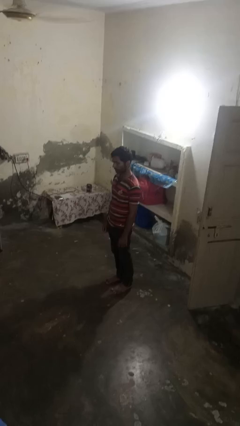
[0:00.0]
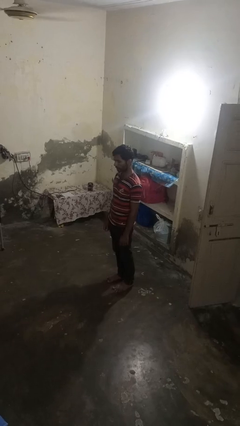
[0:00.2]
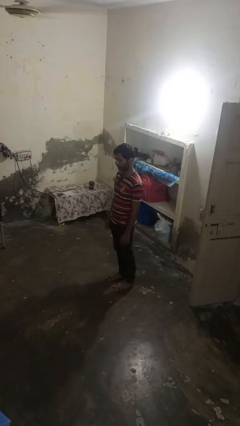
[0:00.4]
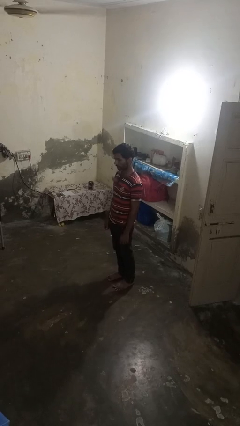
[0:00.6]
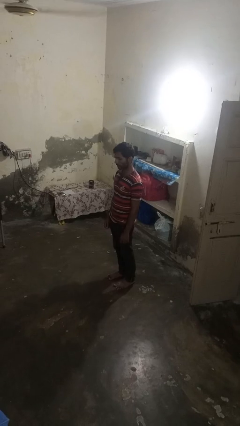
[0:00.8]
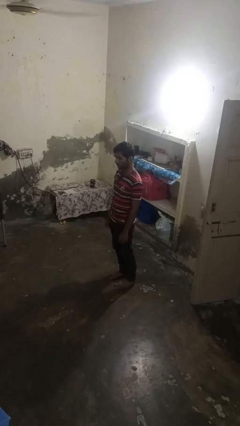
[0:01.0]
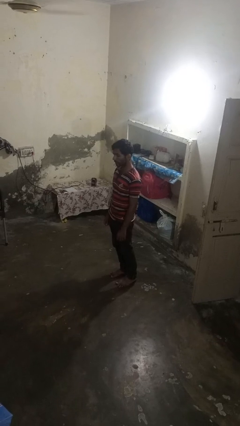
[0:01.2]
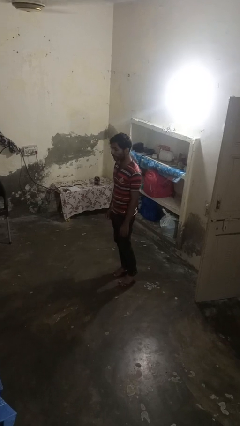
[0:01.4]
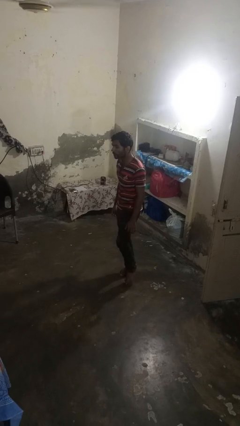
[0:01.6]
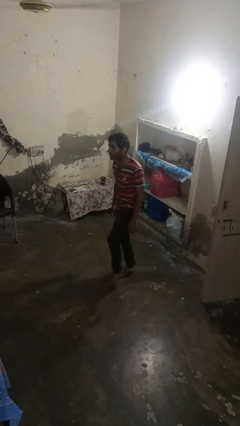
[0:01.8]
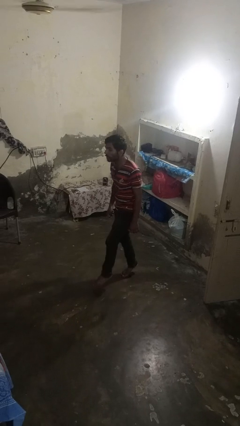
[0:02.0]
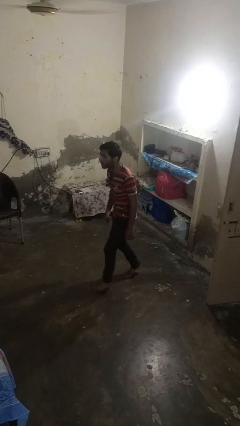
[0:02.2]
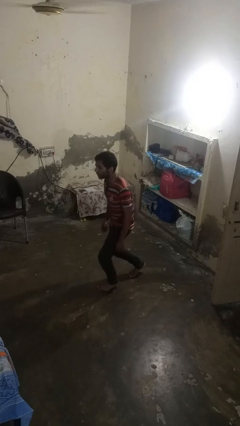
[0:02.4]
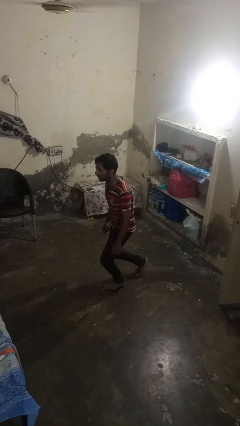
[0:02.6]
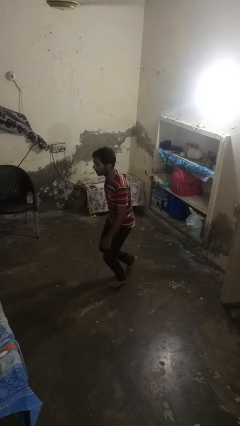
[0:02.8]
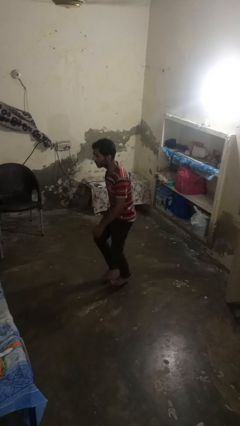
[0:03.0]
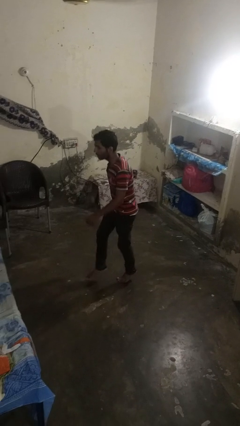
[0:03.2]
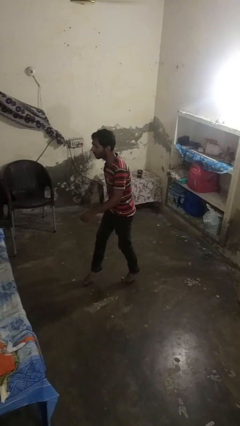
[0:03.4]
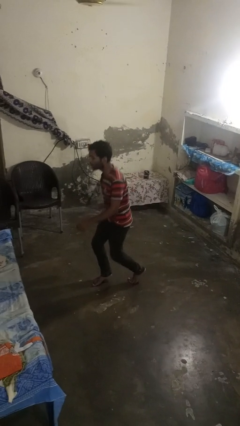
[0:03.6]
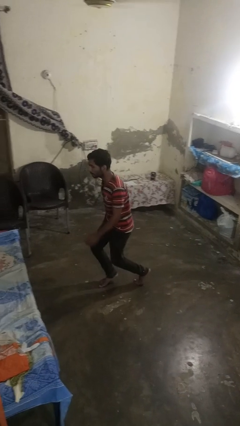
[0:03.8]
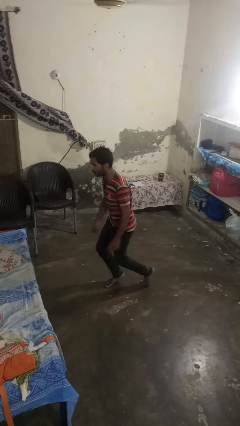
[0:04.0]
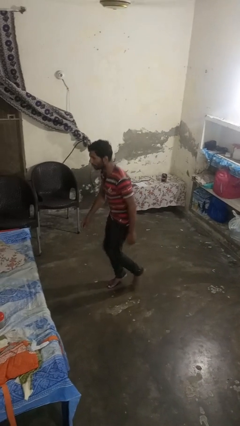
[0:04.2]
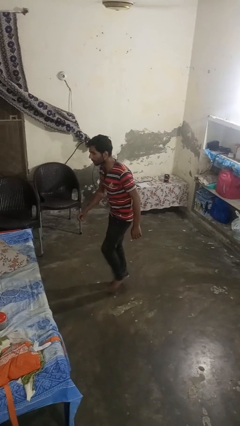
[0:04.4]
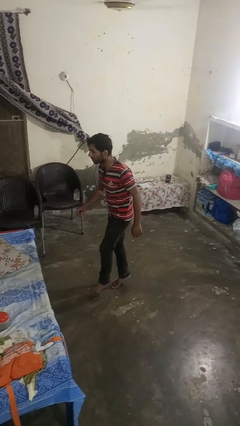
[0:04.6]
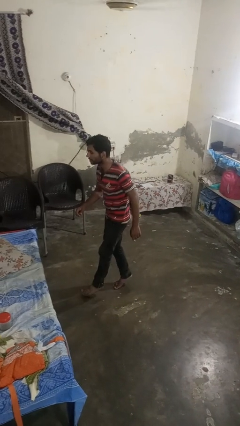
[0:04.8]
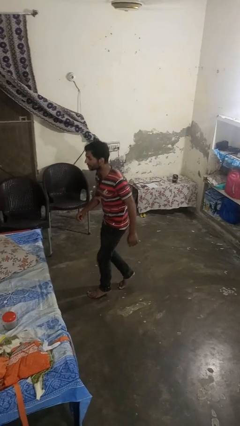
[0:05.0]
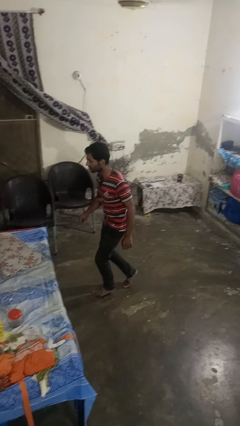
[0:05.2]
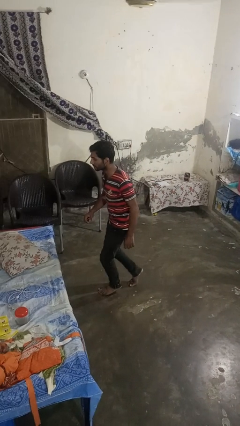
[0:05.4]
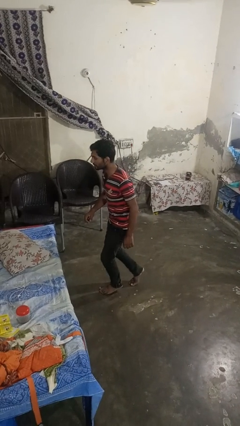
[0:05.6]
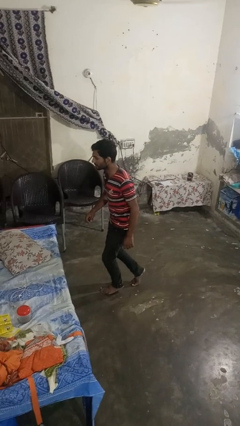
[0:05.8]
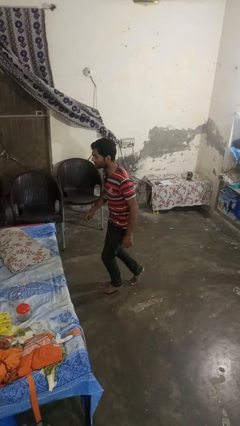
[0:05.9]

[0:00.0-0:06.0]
person walks tiptoe

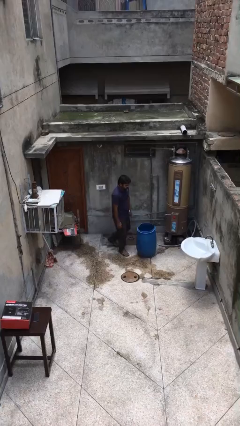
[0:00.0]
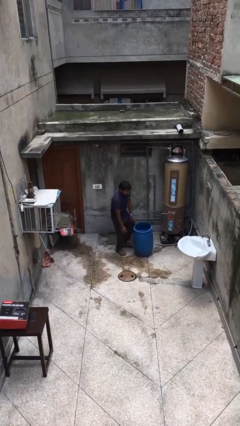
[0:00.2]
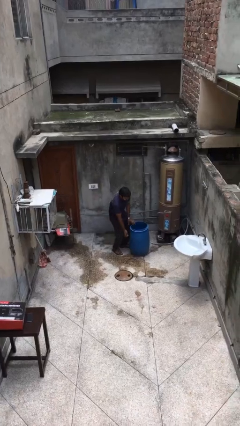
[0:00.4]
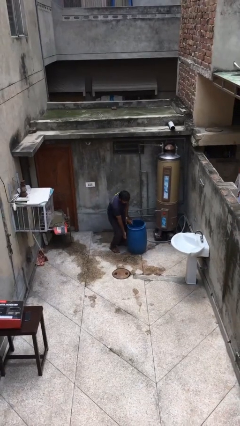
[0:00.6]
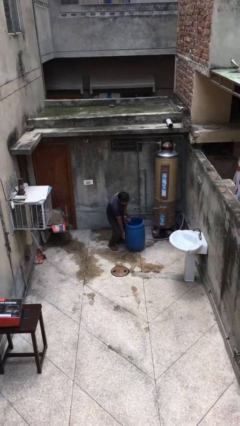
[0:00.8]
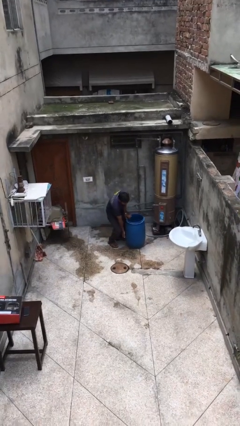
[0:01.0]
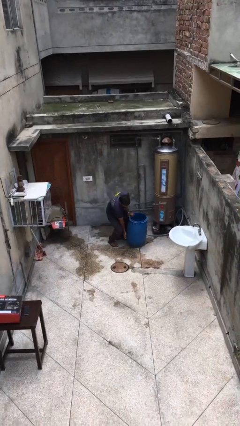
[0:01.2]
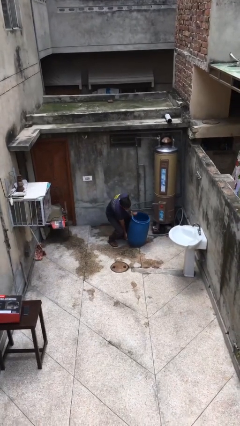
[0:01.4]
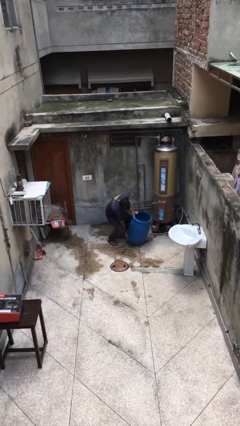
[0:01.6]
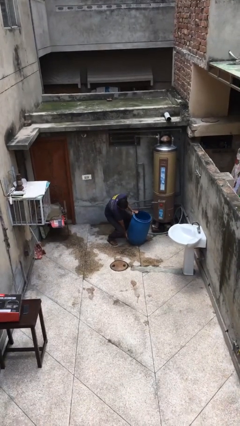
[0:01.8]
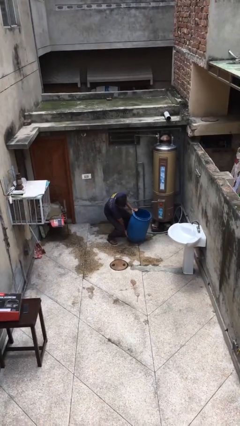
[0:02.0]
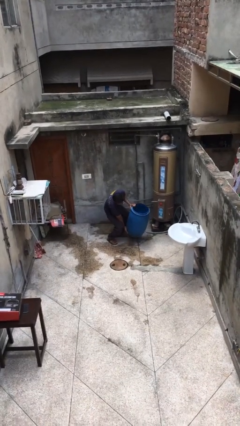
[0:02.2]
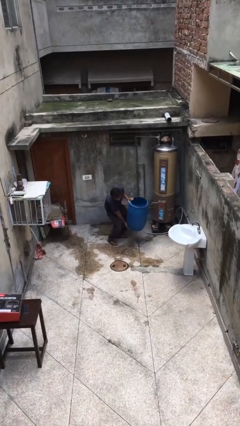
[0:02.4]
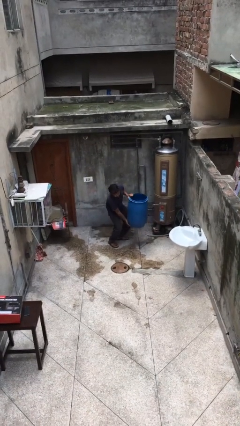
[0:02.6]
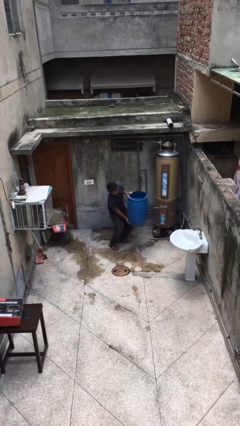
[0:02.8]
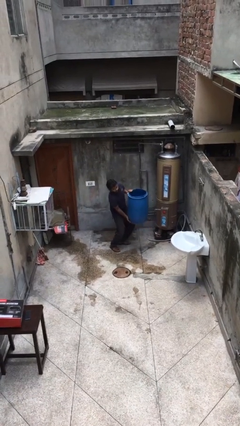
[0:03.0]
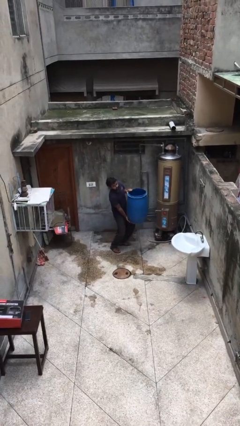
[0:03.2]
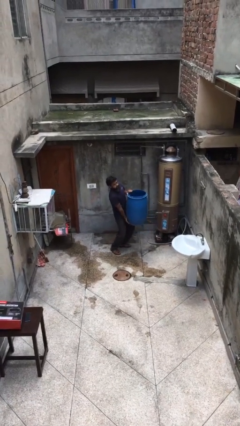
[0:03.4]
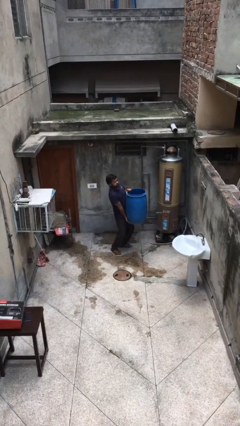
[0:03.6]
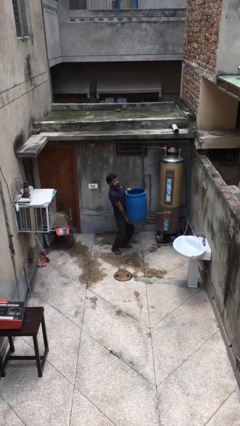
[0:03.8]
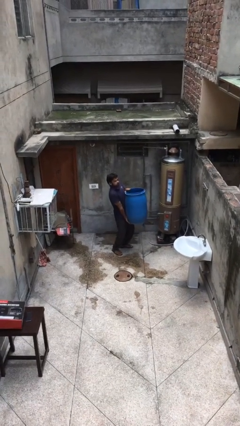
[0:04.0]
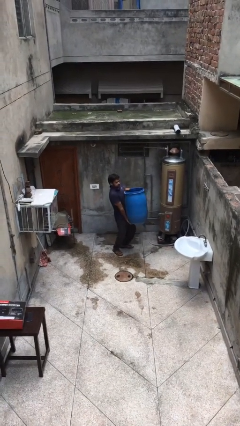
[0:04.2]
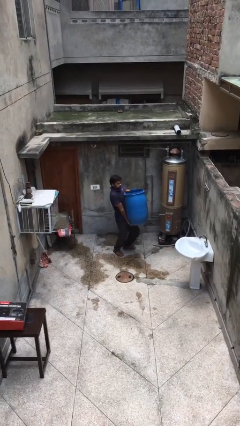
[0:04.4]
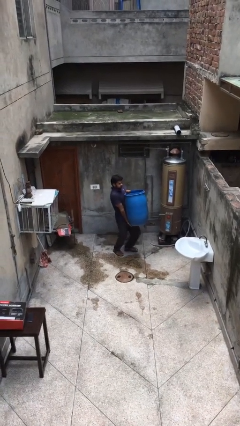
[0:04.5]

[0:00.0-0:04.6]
person picks up object from floor

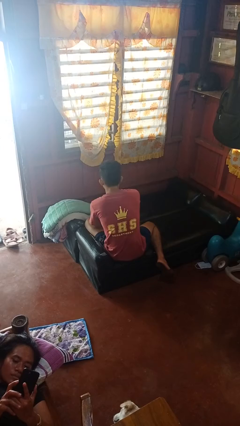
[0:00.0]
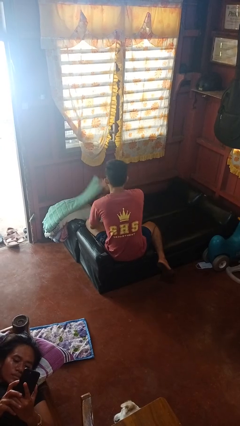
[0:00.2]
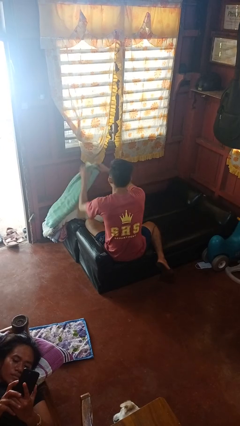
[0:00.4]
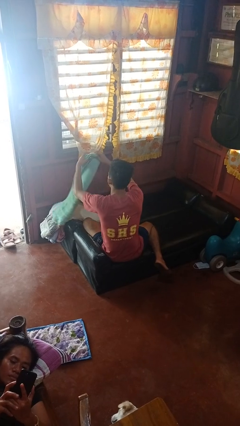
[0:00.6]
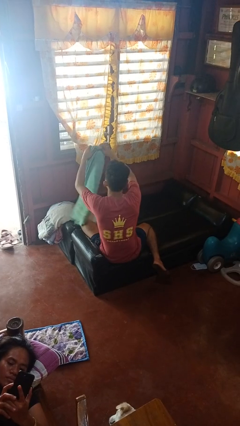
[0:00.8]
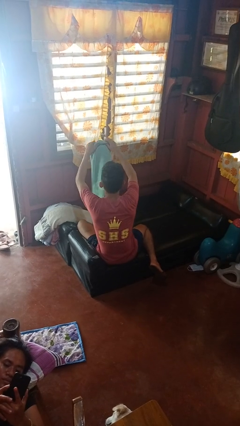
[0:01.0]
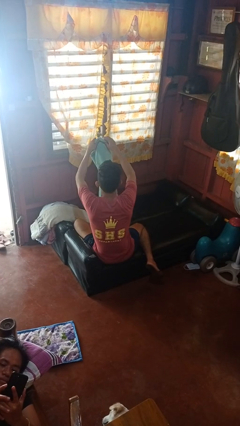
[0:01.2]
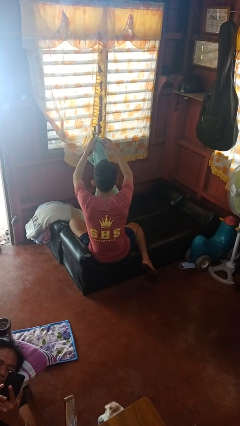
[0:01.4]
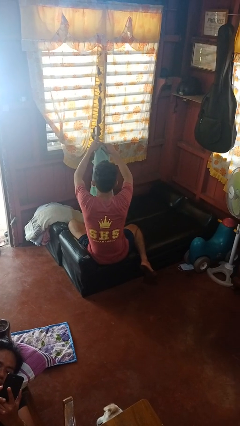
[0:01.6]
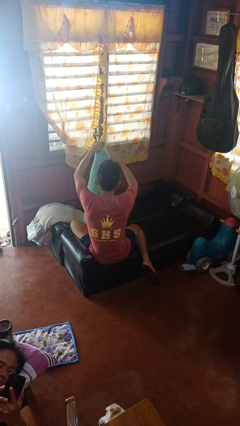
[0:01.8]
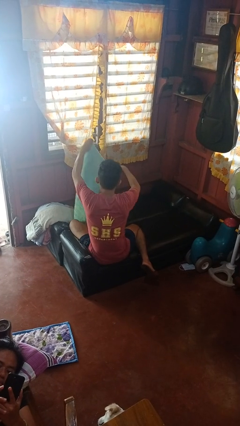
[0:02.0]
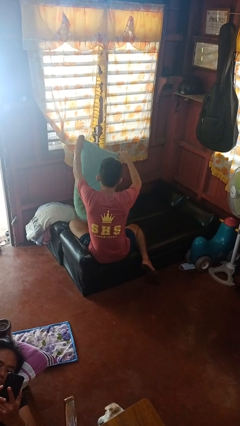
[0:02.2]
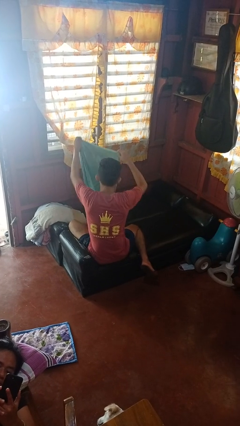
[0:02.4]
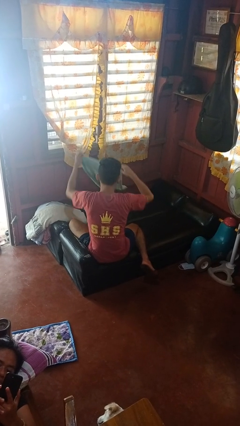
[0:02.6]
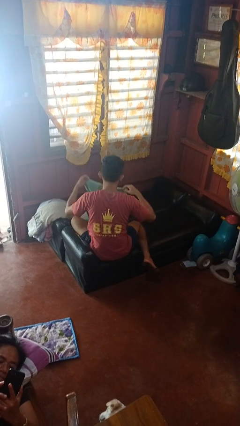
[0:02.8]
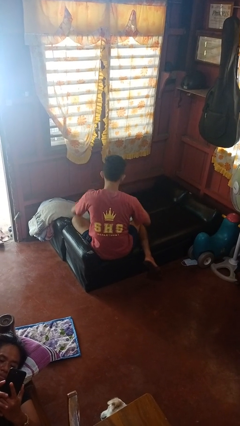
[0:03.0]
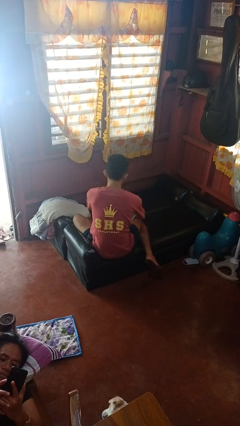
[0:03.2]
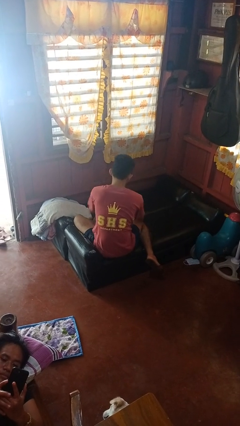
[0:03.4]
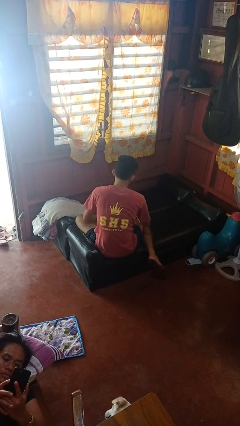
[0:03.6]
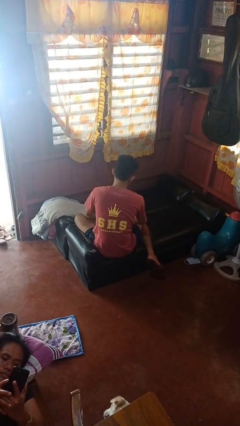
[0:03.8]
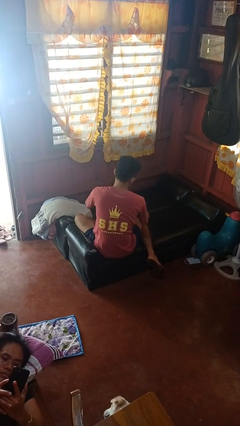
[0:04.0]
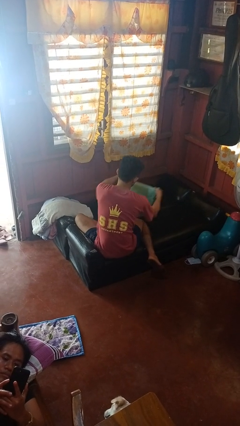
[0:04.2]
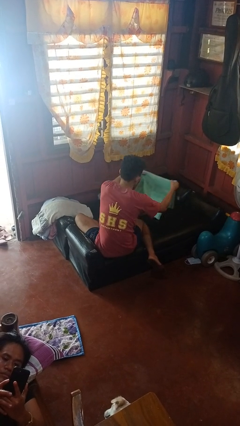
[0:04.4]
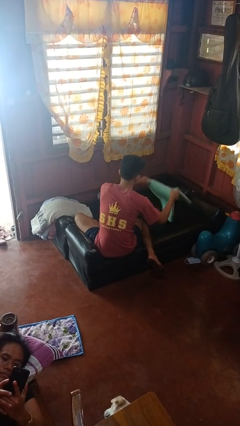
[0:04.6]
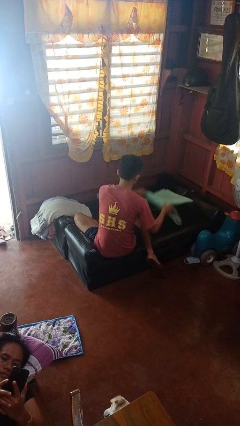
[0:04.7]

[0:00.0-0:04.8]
person folds towel

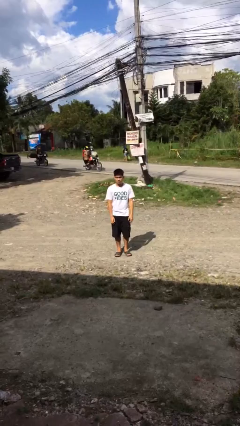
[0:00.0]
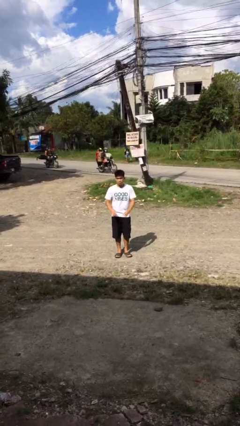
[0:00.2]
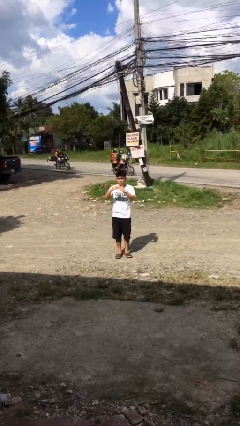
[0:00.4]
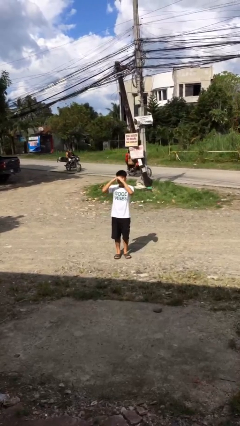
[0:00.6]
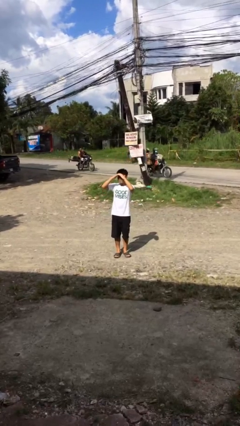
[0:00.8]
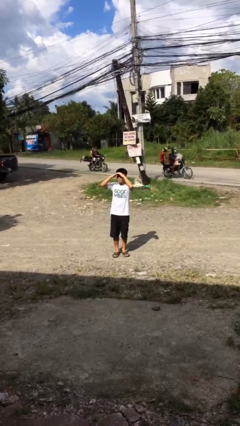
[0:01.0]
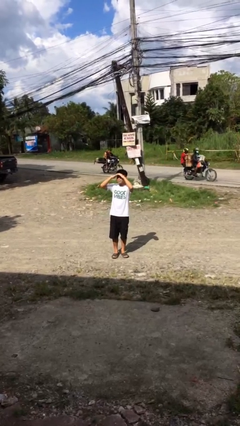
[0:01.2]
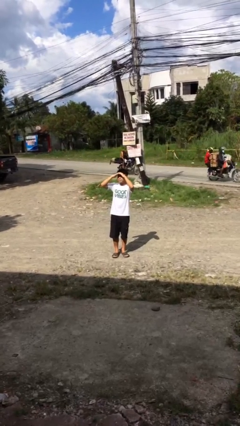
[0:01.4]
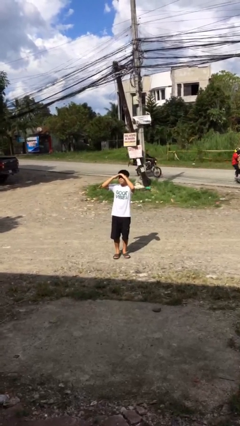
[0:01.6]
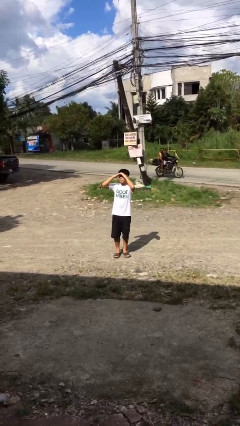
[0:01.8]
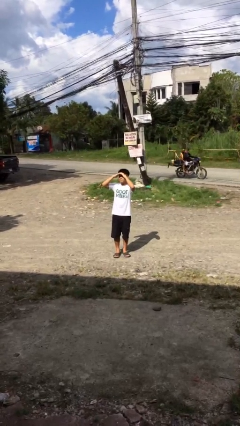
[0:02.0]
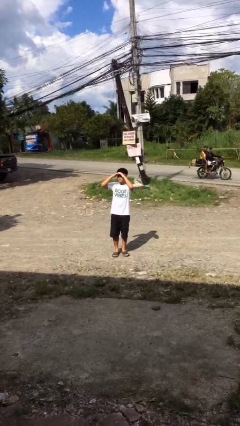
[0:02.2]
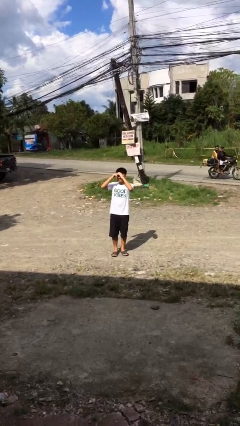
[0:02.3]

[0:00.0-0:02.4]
person shades eyes
